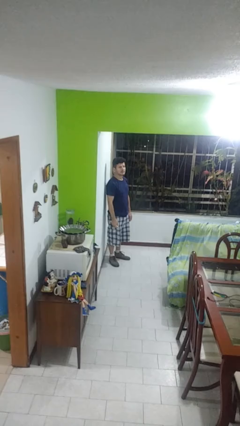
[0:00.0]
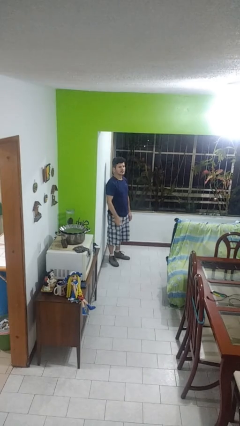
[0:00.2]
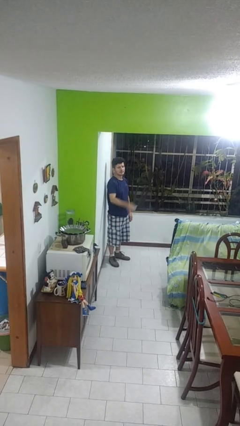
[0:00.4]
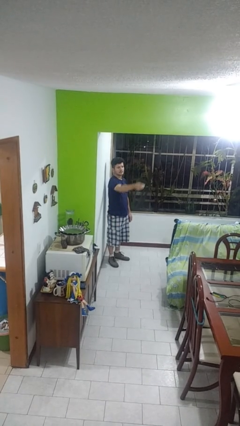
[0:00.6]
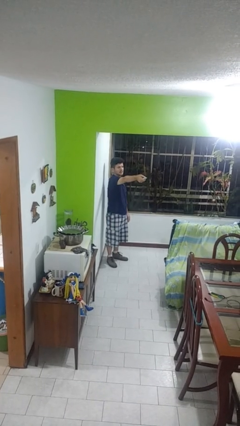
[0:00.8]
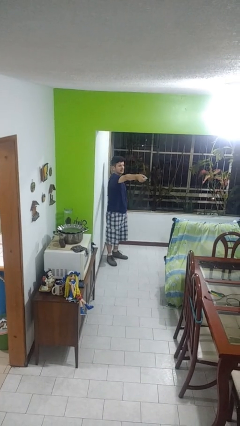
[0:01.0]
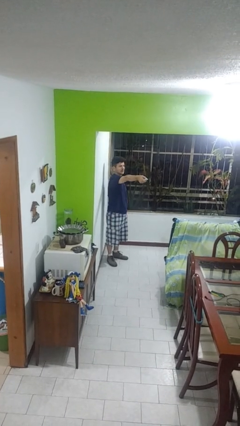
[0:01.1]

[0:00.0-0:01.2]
person uses television remote

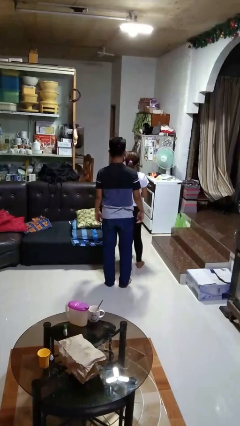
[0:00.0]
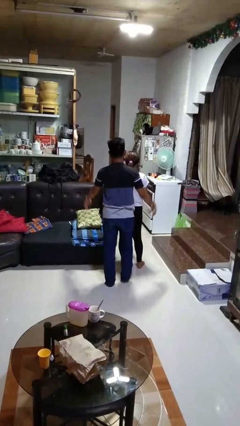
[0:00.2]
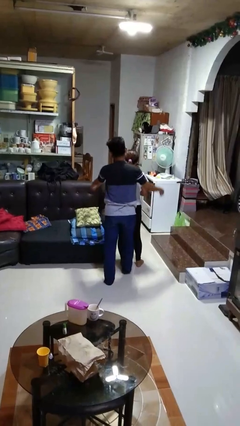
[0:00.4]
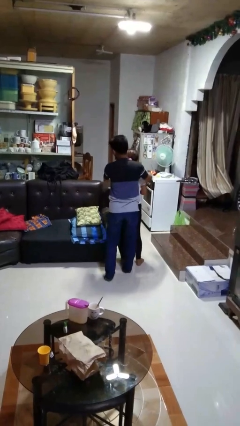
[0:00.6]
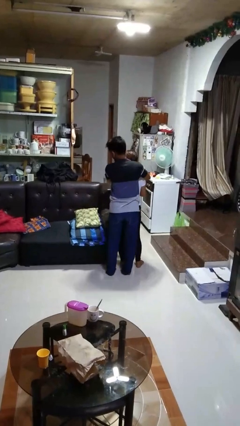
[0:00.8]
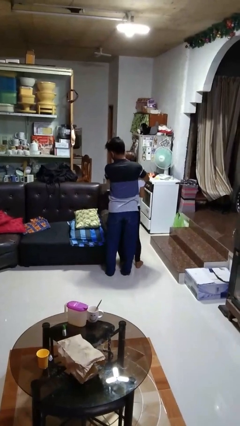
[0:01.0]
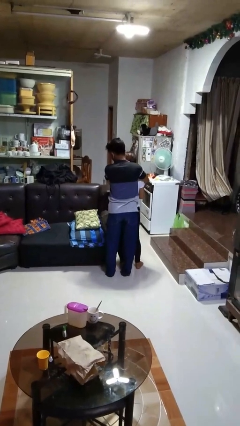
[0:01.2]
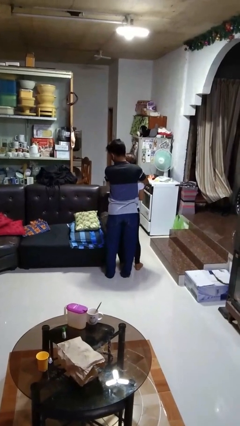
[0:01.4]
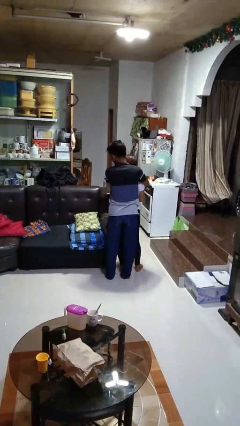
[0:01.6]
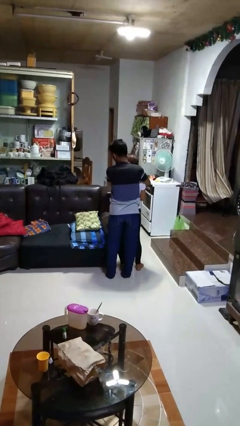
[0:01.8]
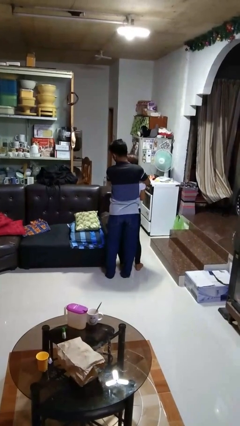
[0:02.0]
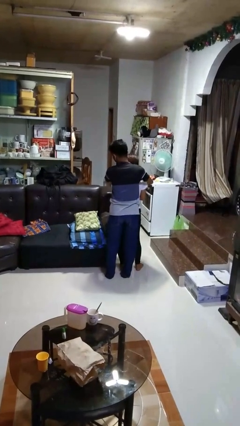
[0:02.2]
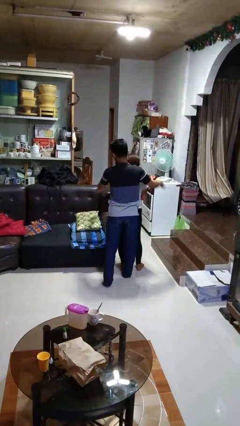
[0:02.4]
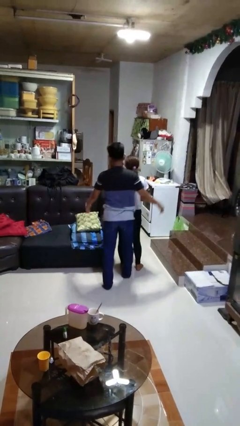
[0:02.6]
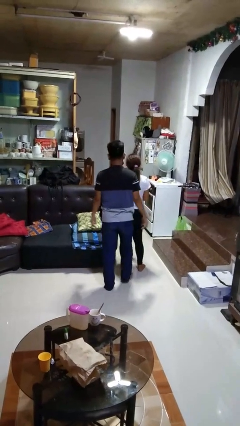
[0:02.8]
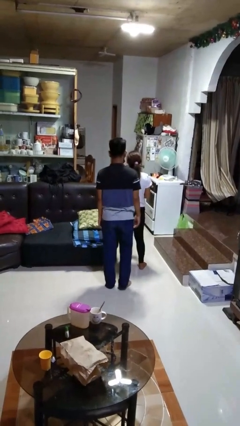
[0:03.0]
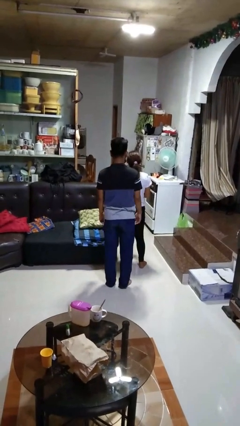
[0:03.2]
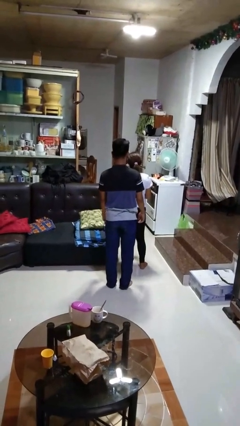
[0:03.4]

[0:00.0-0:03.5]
person hugs person from behind

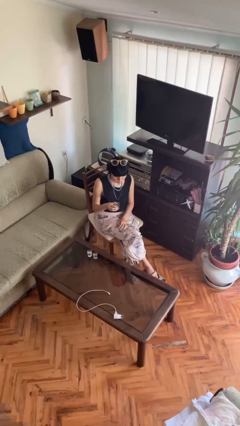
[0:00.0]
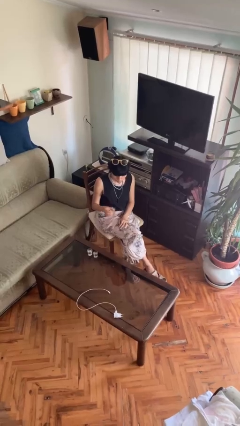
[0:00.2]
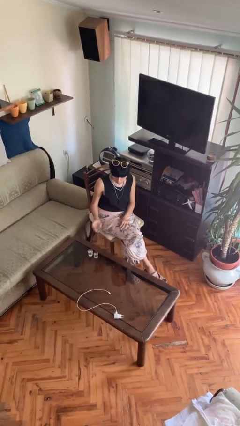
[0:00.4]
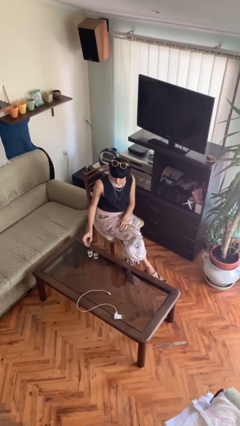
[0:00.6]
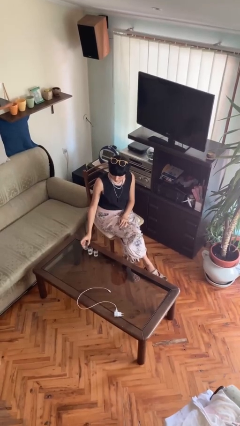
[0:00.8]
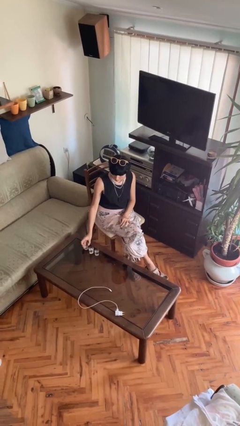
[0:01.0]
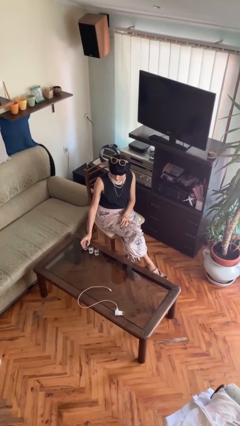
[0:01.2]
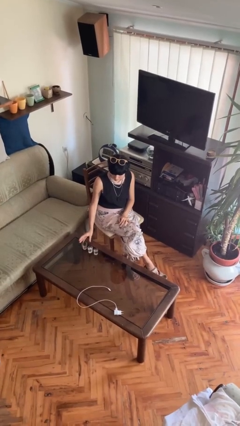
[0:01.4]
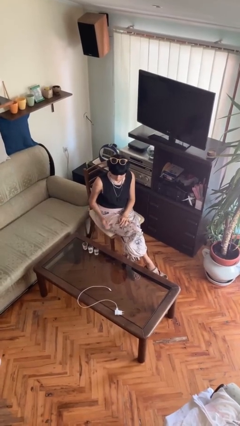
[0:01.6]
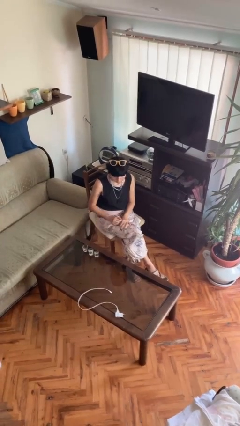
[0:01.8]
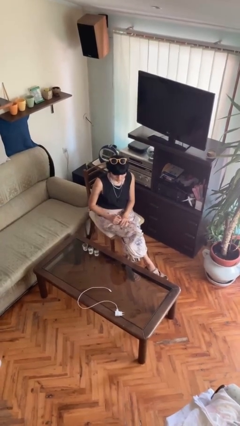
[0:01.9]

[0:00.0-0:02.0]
person puts down object on table

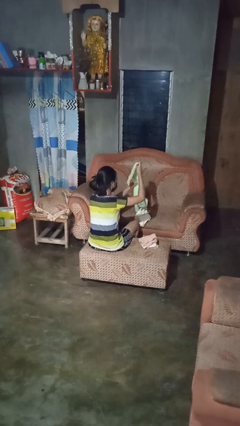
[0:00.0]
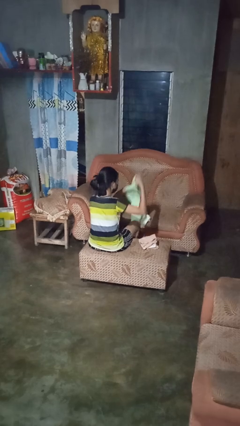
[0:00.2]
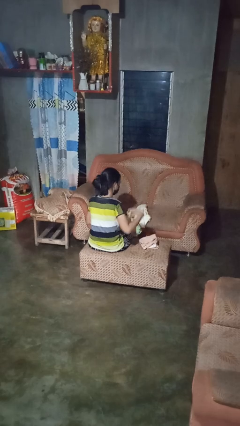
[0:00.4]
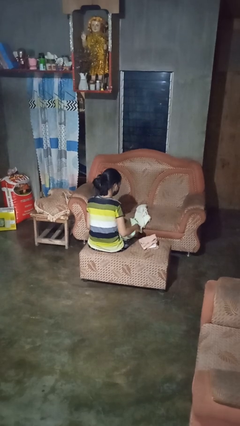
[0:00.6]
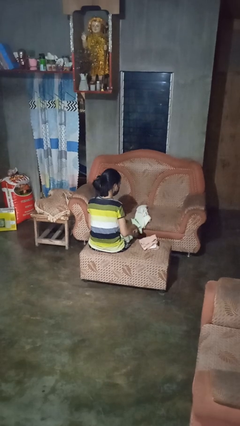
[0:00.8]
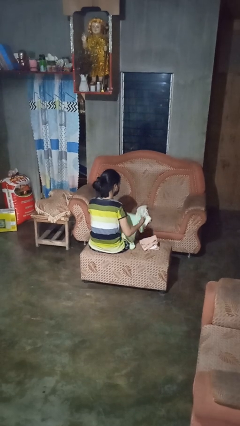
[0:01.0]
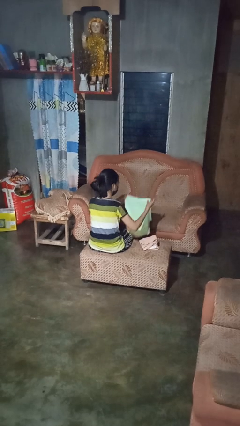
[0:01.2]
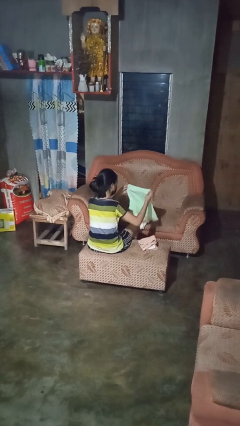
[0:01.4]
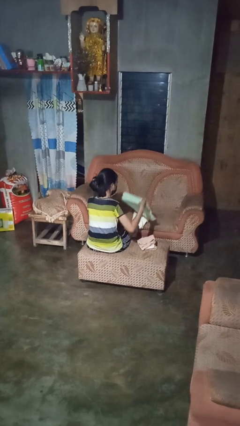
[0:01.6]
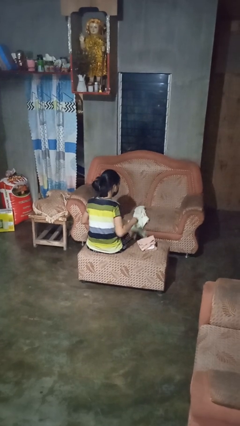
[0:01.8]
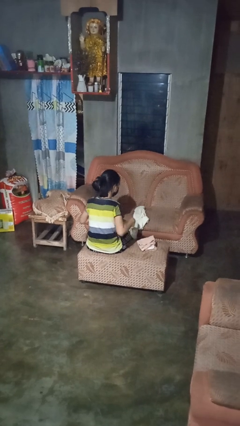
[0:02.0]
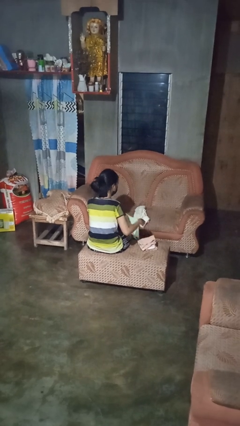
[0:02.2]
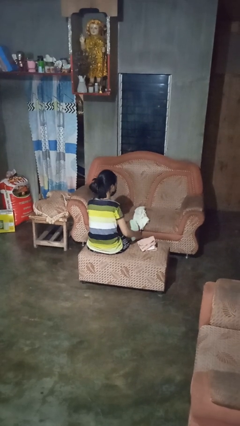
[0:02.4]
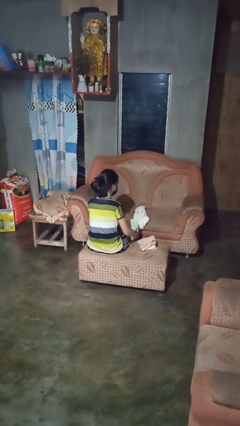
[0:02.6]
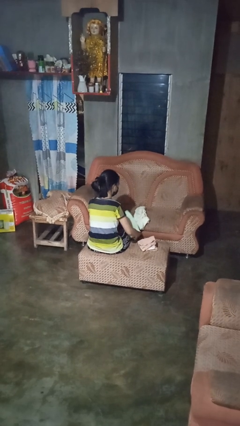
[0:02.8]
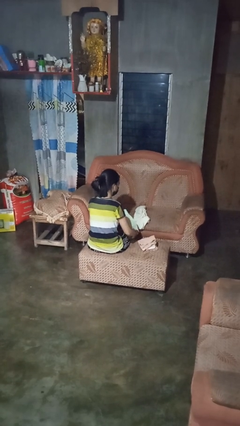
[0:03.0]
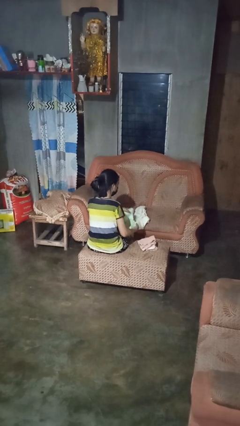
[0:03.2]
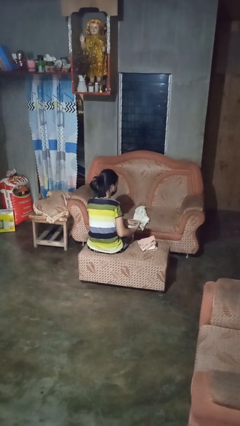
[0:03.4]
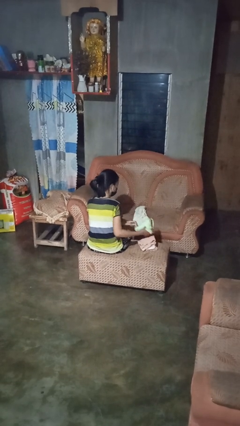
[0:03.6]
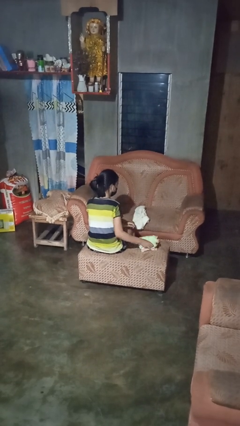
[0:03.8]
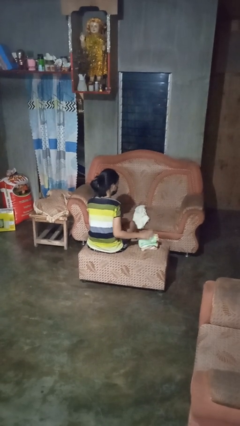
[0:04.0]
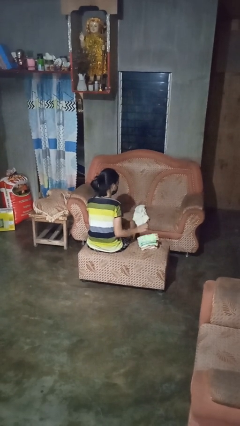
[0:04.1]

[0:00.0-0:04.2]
person folds towel

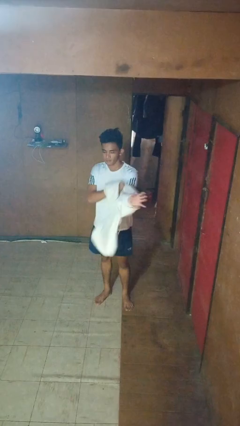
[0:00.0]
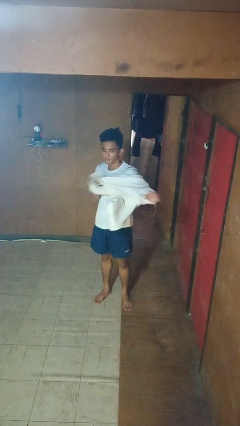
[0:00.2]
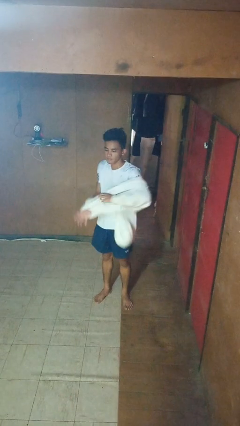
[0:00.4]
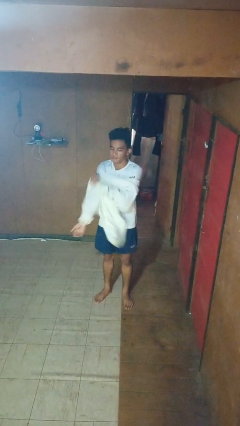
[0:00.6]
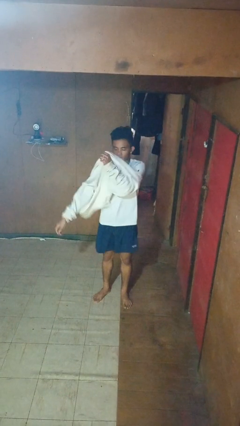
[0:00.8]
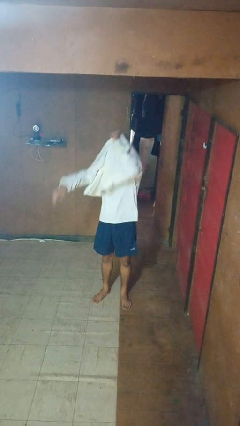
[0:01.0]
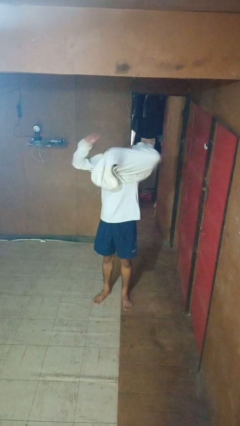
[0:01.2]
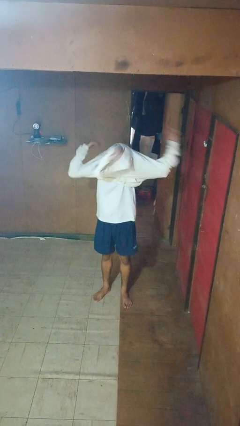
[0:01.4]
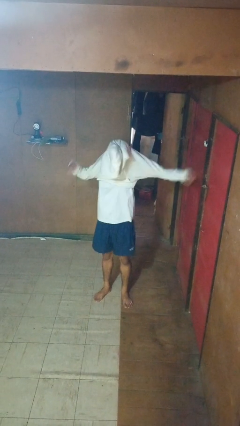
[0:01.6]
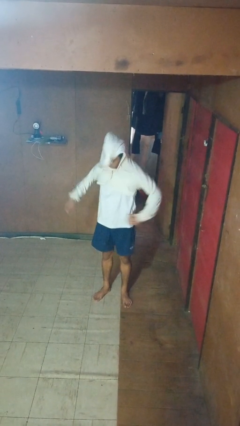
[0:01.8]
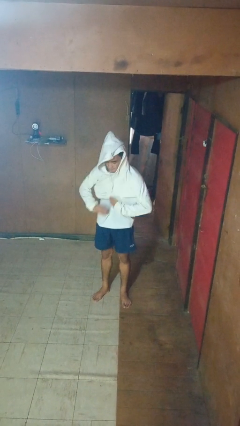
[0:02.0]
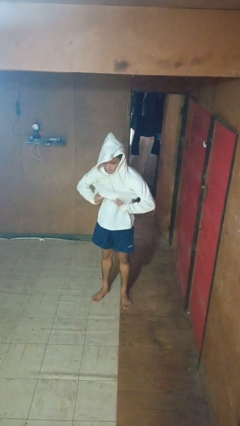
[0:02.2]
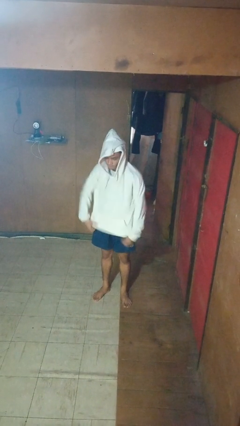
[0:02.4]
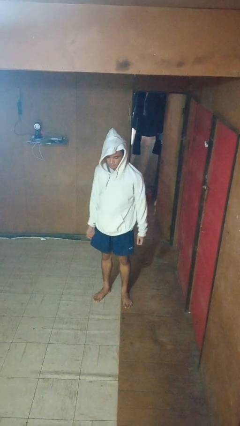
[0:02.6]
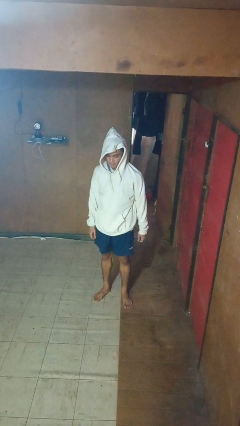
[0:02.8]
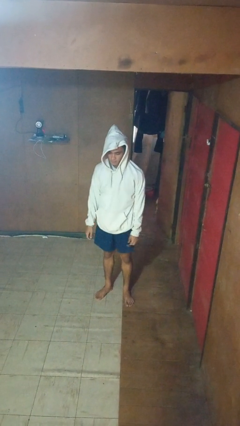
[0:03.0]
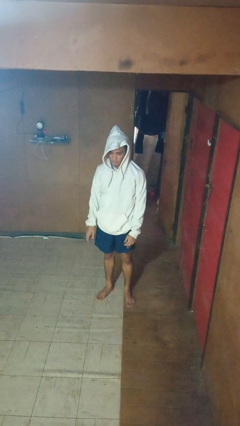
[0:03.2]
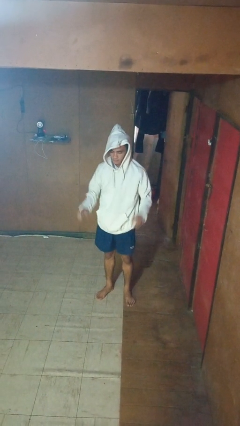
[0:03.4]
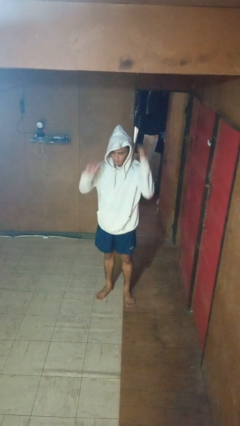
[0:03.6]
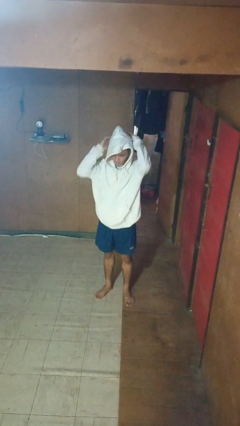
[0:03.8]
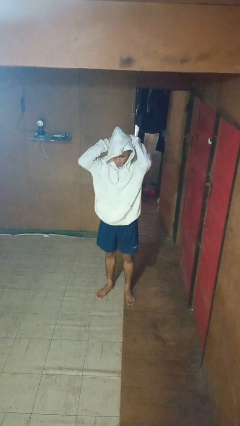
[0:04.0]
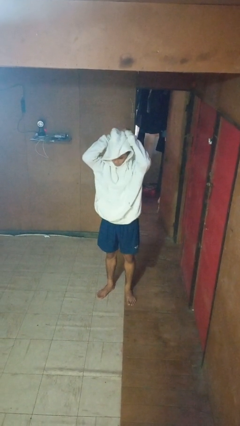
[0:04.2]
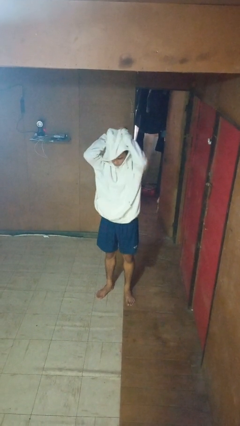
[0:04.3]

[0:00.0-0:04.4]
person puts on hoodie

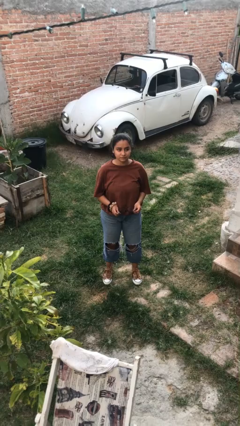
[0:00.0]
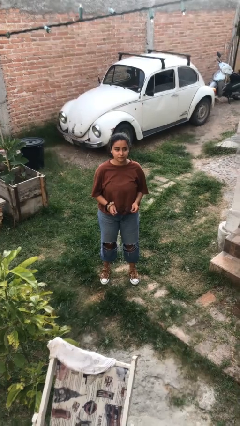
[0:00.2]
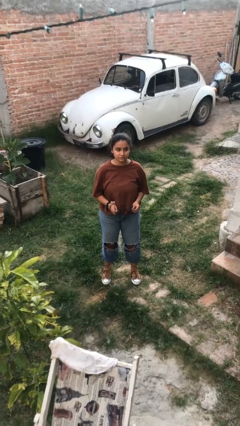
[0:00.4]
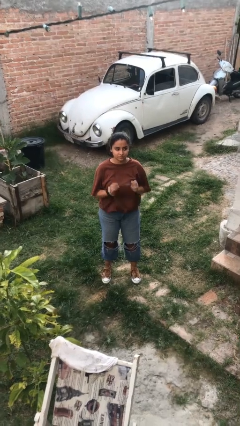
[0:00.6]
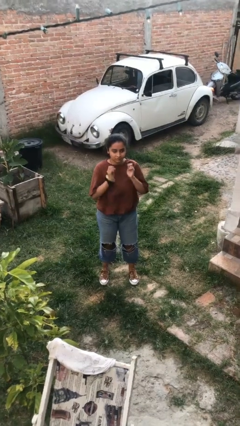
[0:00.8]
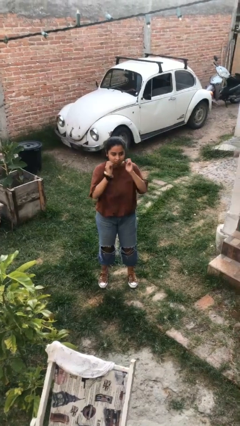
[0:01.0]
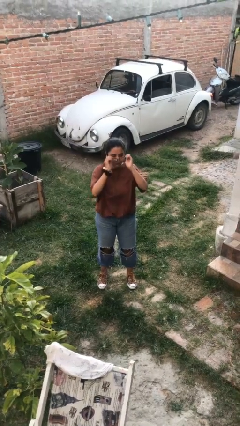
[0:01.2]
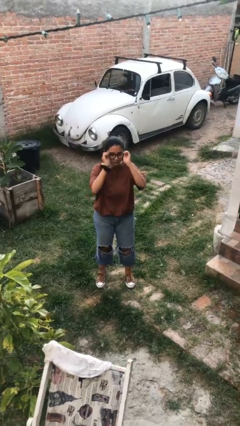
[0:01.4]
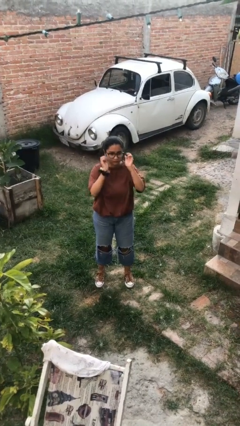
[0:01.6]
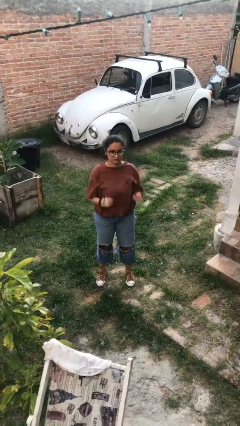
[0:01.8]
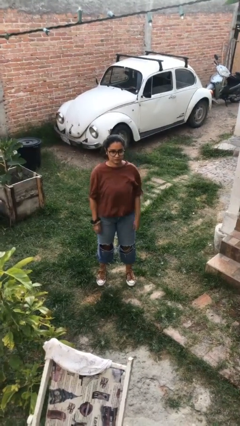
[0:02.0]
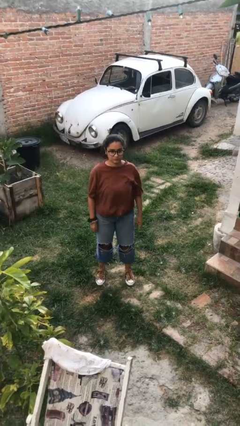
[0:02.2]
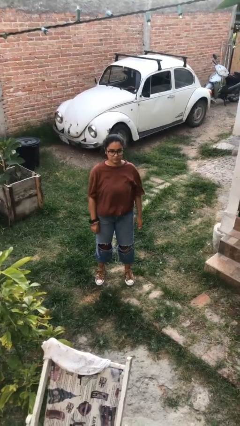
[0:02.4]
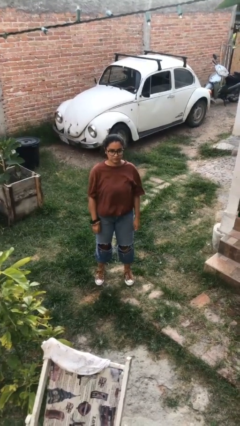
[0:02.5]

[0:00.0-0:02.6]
person puts on glasses
